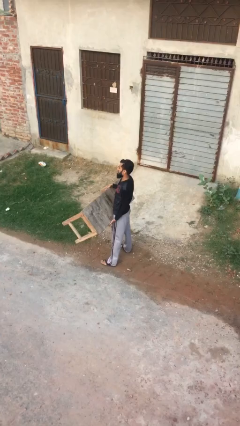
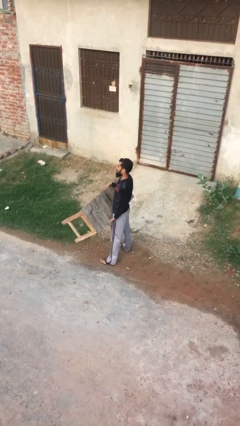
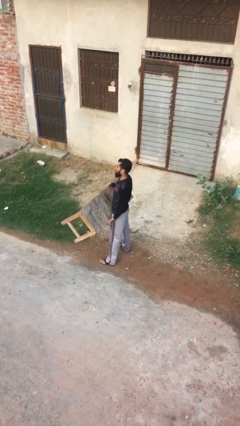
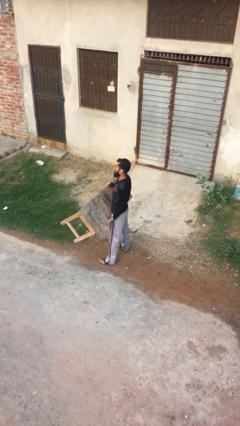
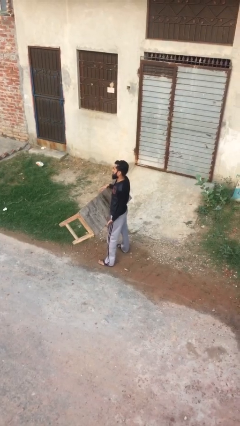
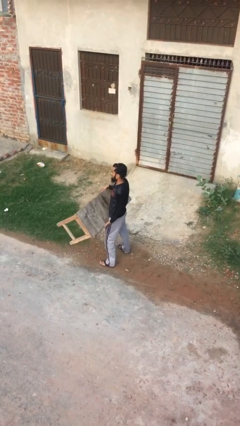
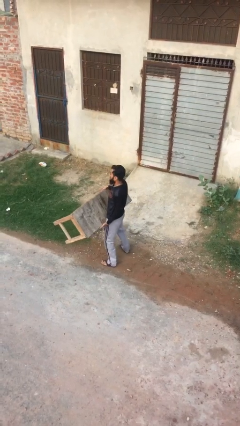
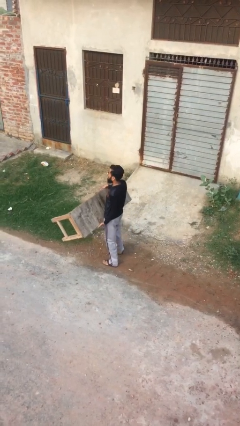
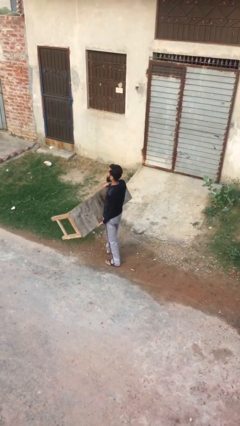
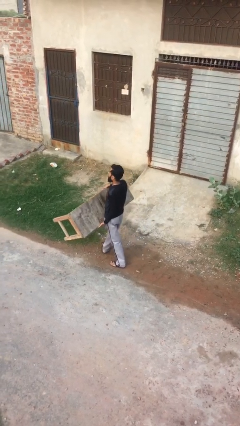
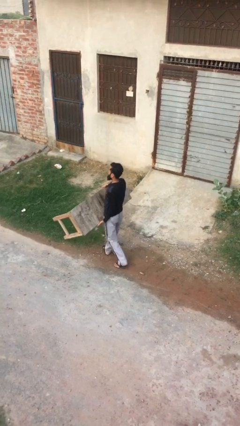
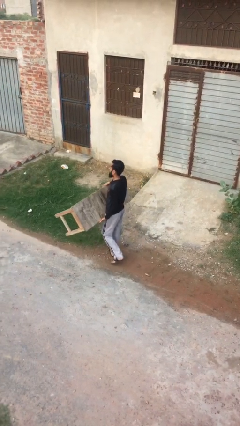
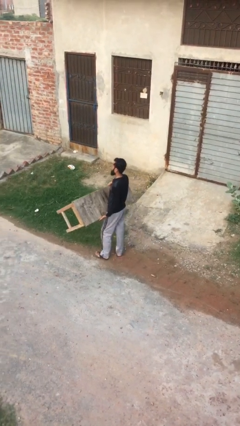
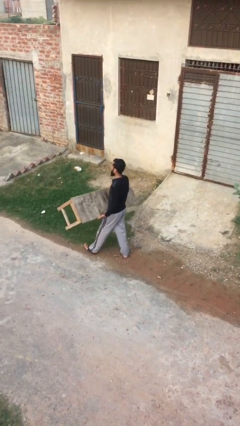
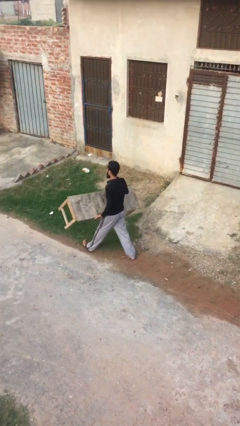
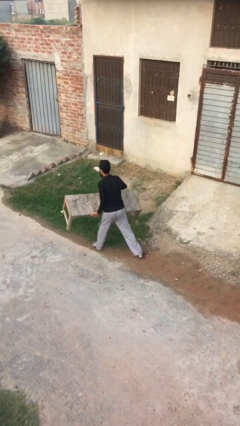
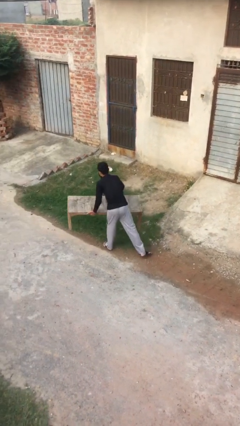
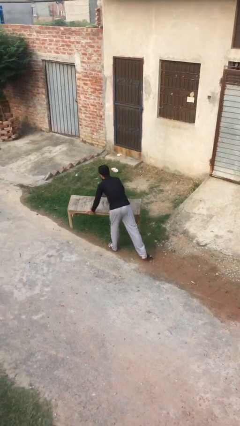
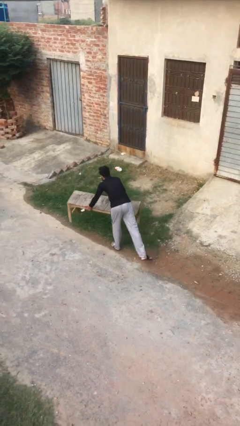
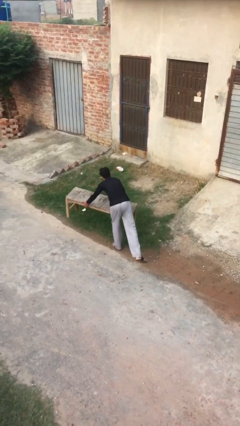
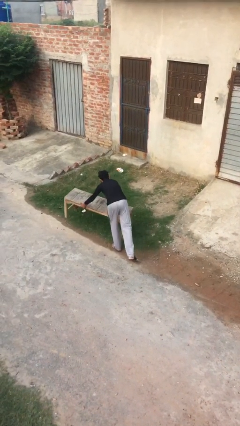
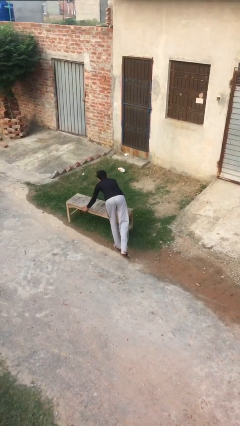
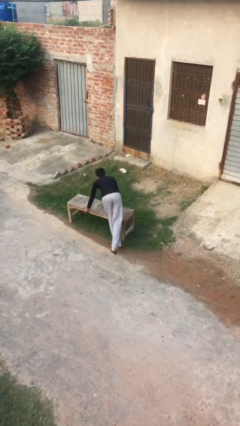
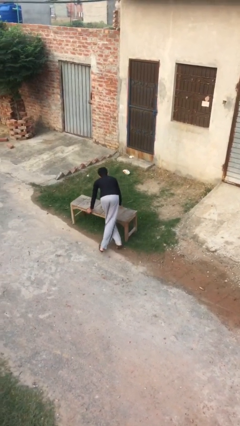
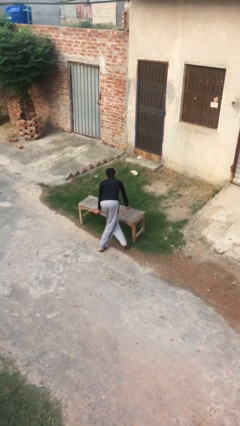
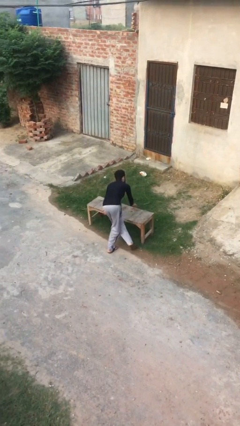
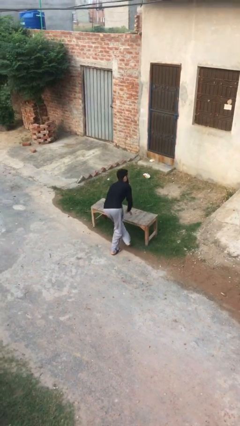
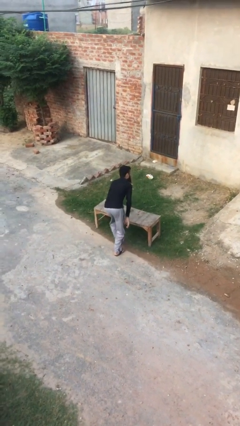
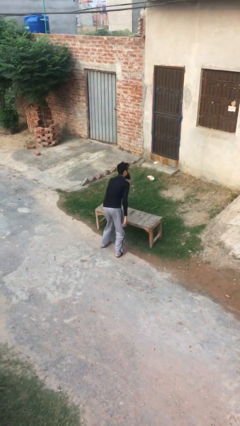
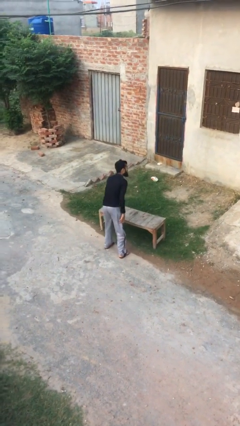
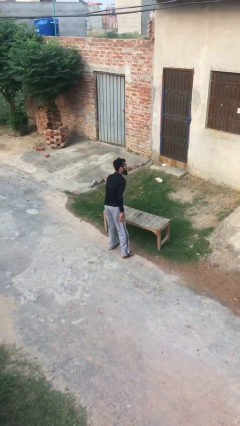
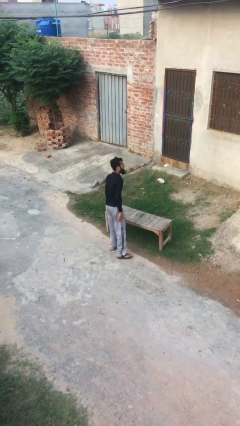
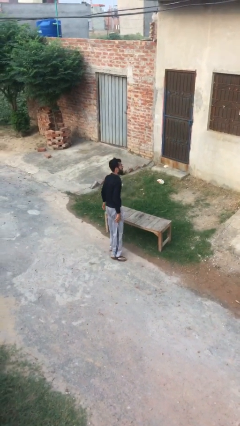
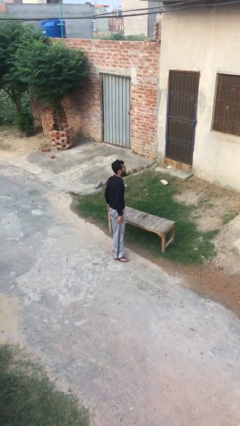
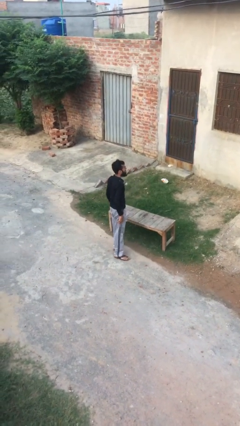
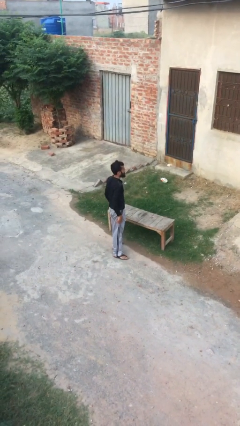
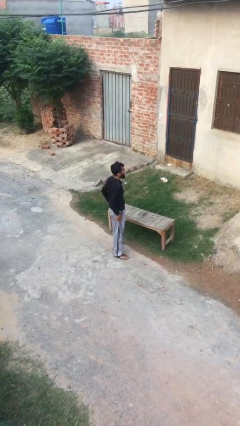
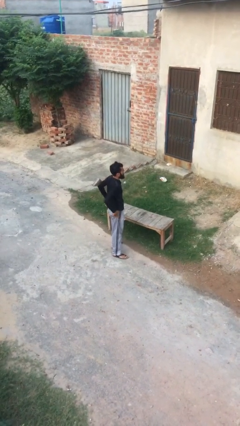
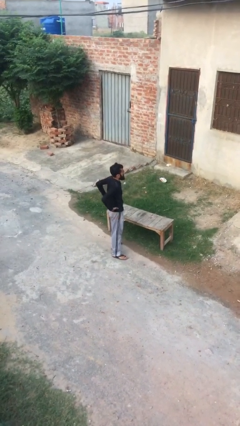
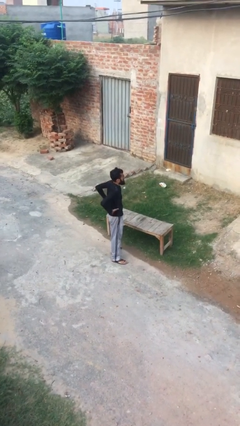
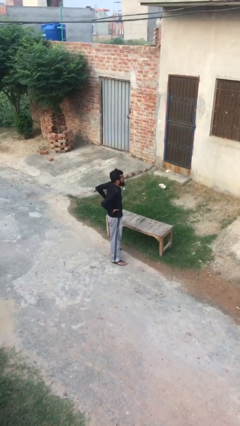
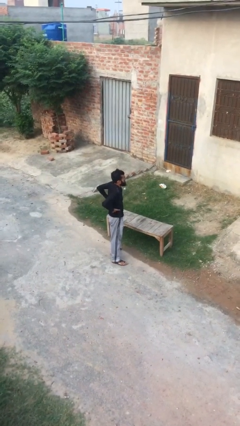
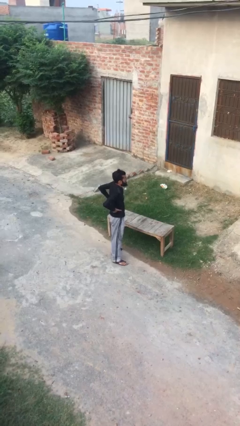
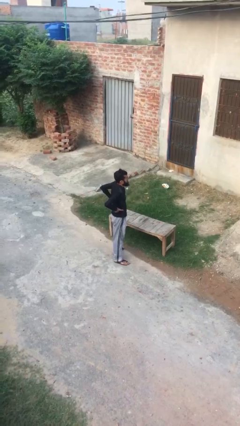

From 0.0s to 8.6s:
person puts down object on floor

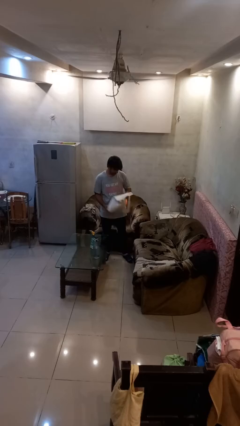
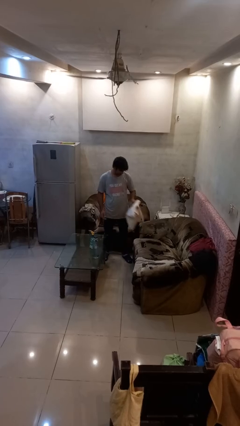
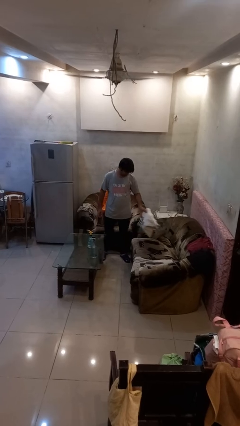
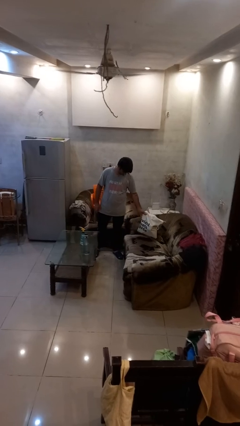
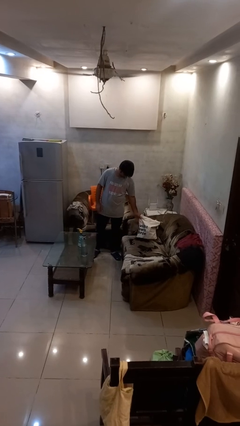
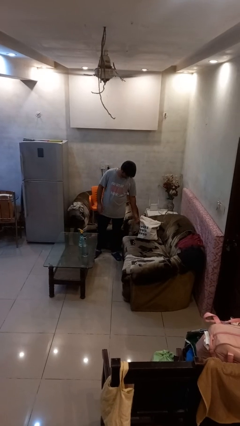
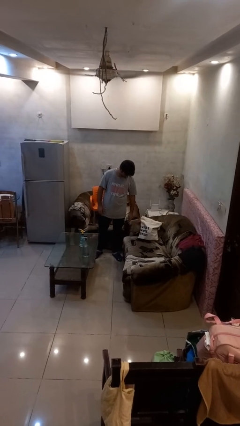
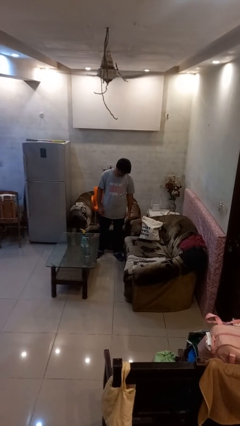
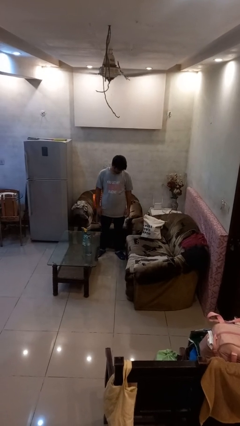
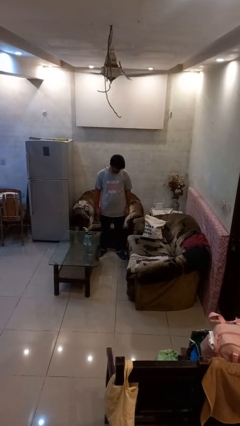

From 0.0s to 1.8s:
person puts down object on couch

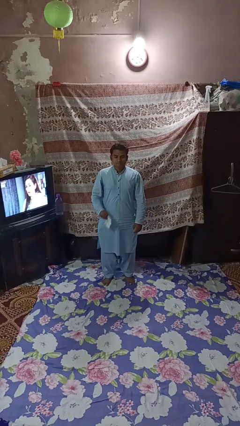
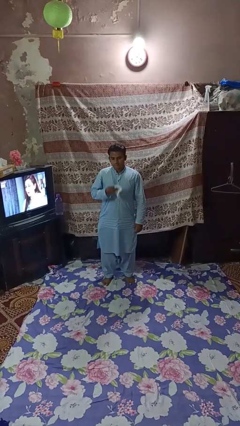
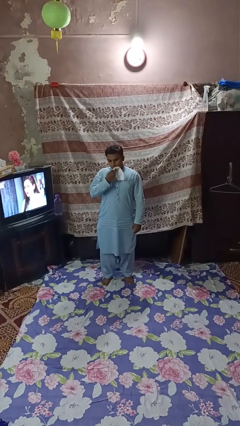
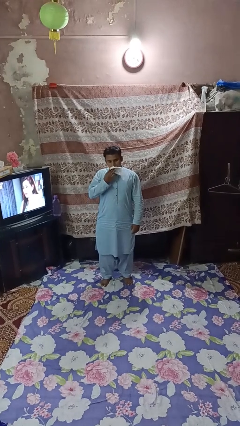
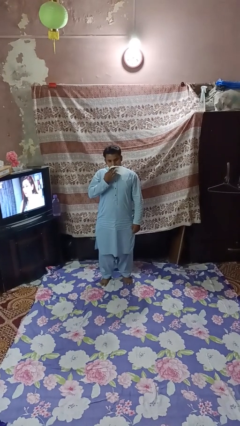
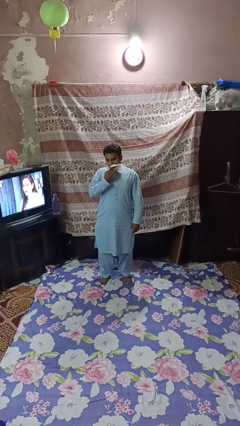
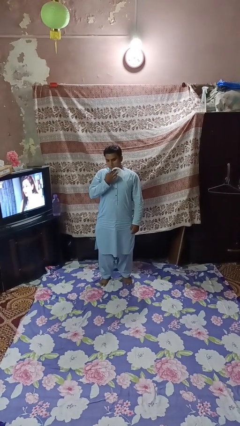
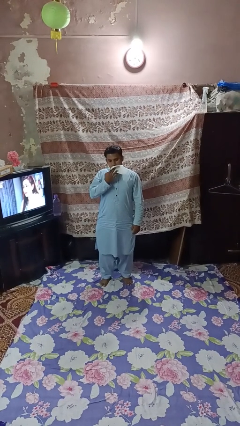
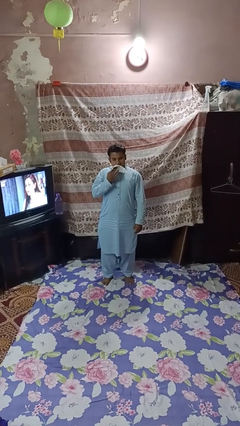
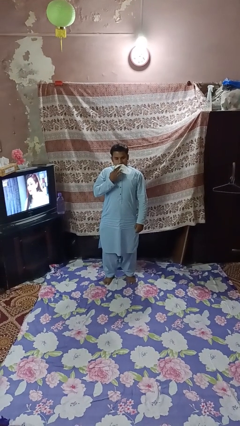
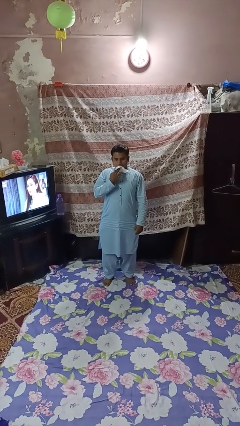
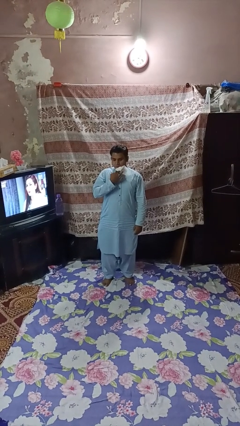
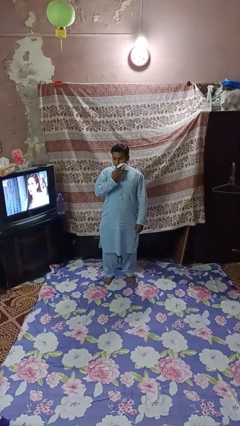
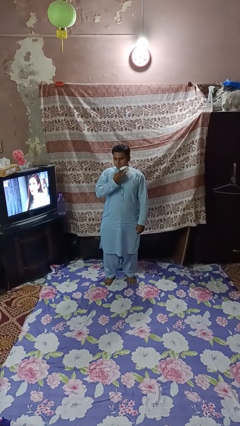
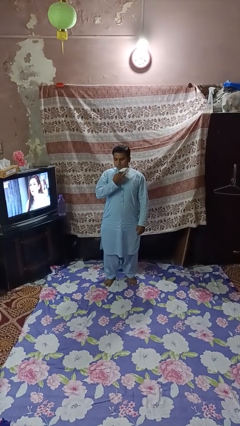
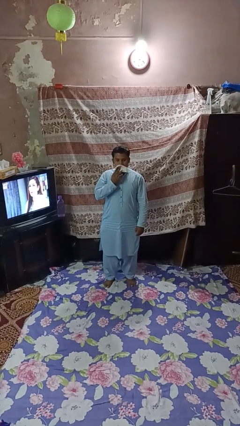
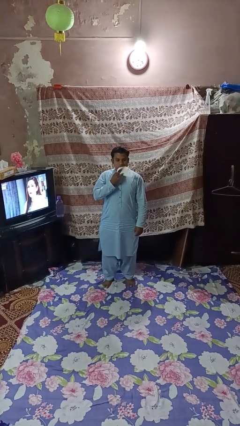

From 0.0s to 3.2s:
person wipes mouth with napkin

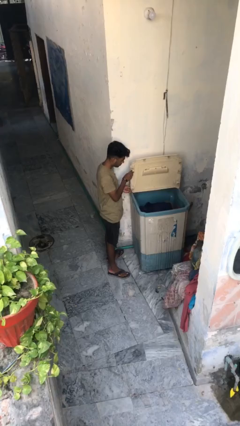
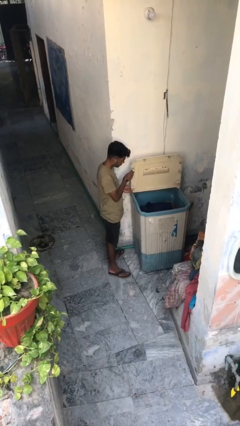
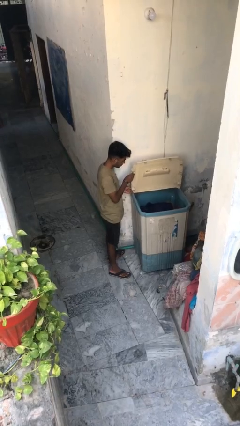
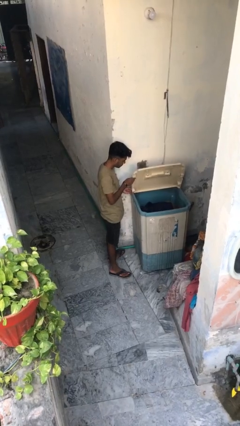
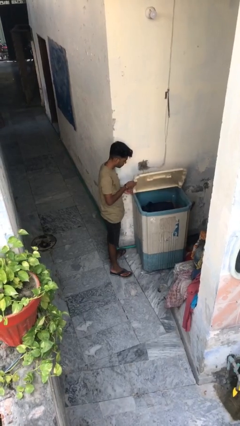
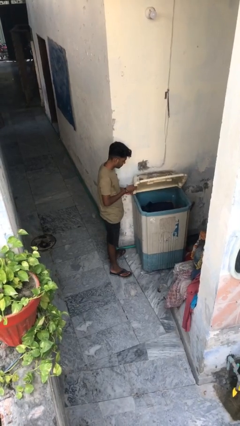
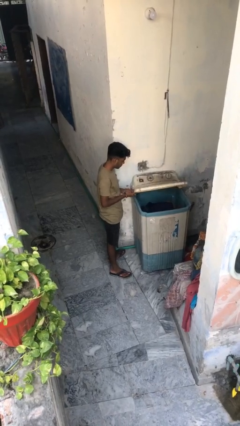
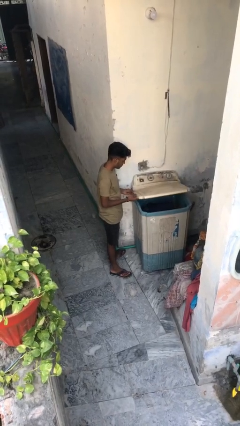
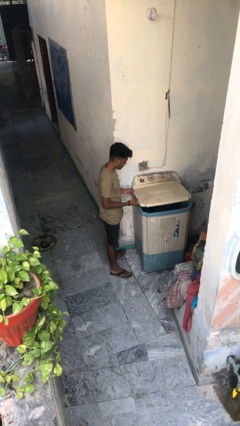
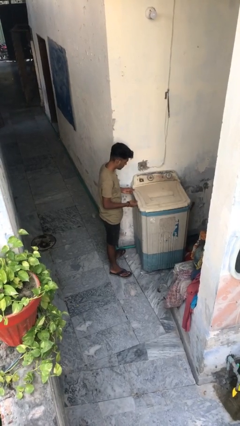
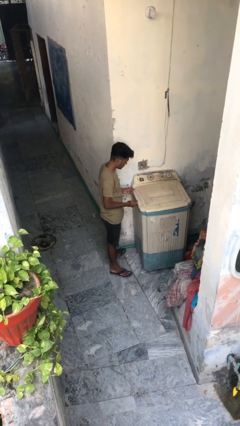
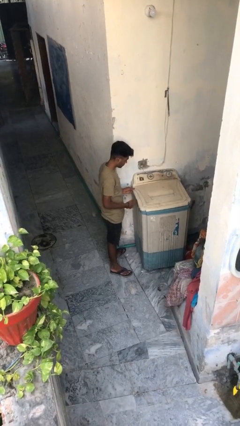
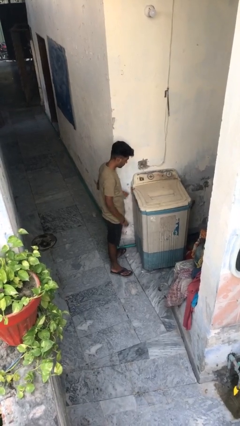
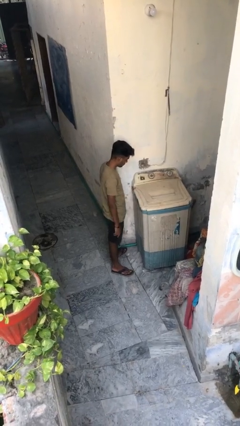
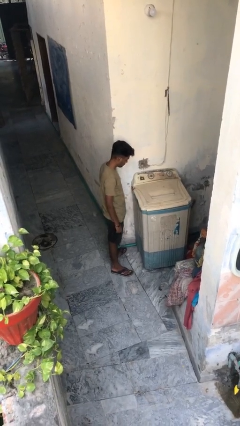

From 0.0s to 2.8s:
person closes clothes washer

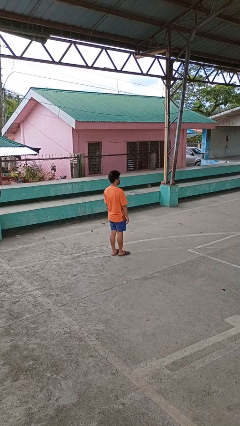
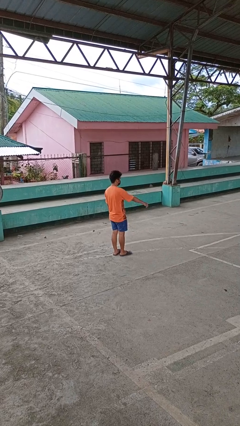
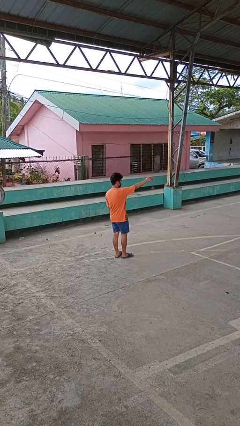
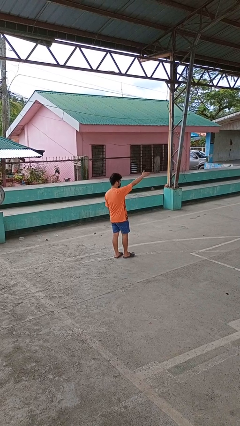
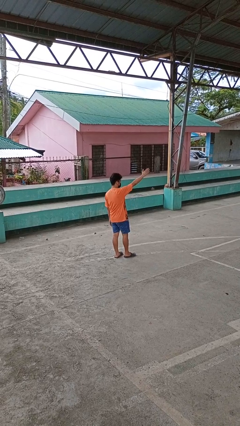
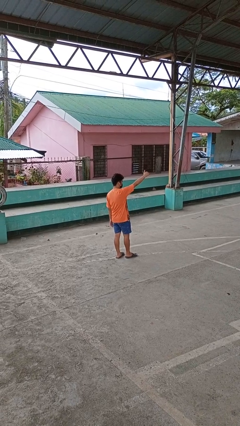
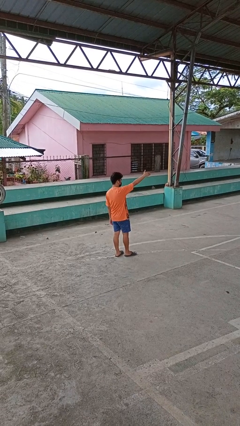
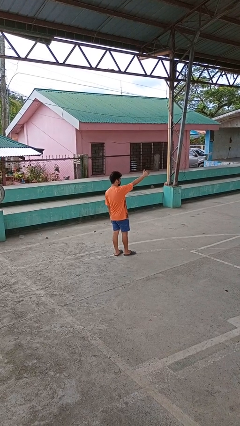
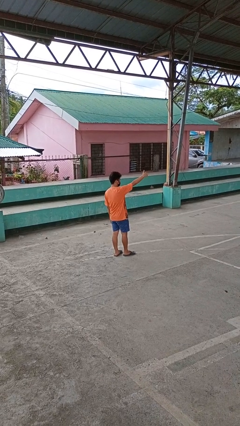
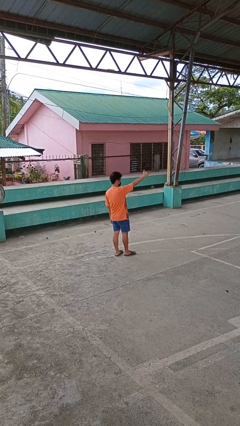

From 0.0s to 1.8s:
person gestures come here
